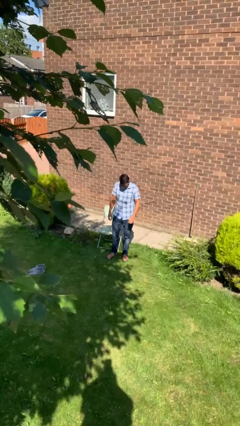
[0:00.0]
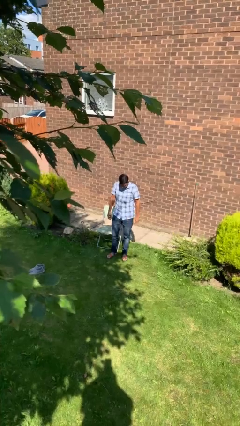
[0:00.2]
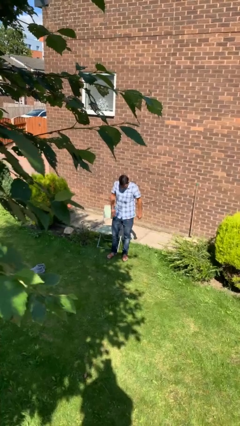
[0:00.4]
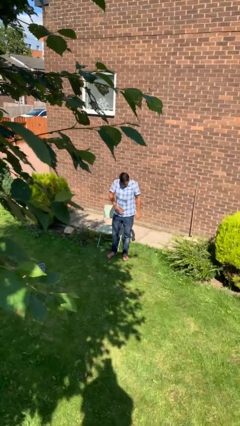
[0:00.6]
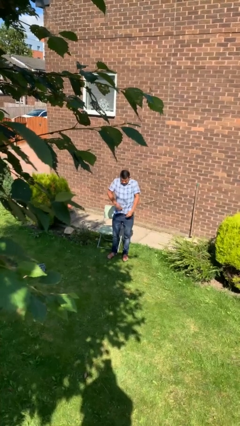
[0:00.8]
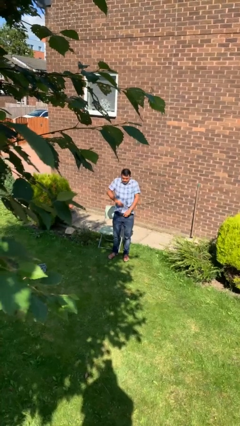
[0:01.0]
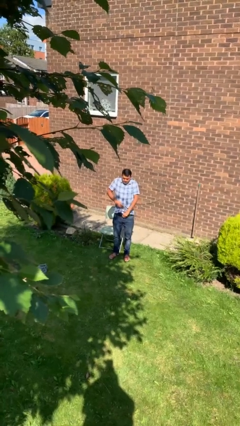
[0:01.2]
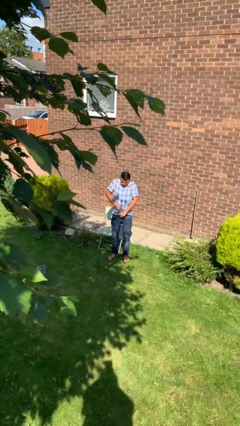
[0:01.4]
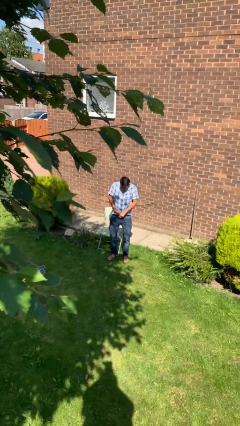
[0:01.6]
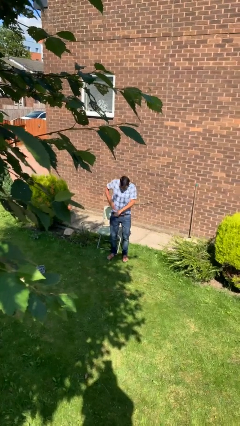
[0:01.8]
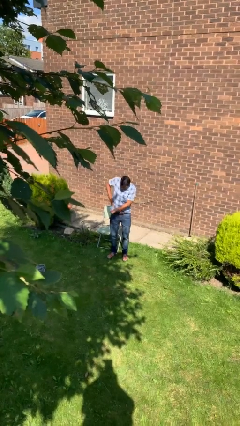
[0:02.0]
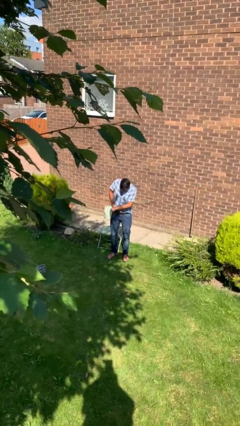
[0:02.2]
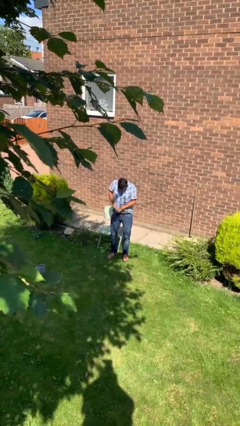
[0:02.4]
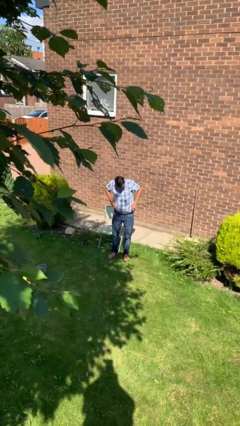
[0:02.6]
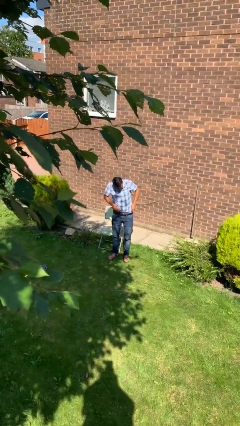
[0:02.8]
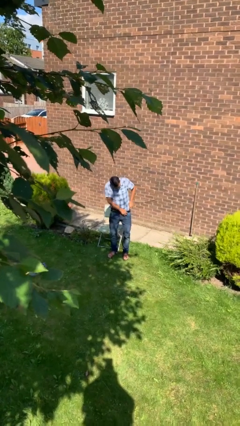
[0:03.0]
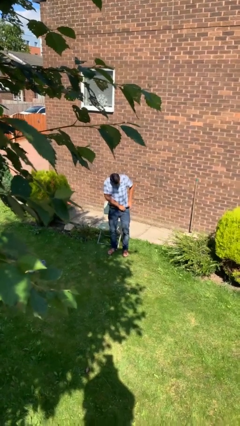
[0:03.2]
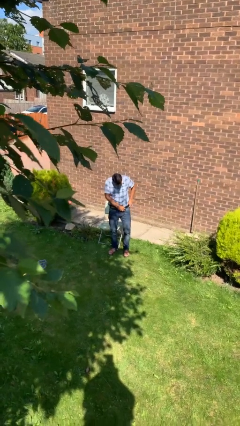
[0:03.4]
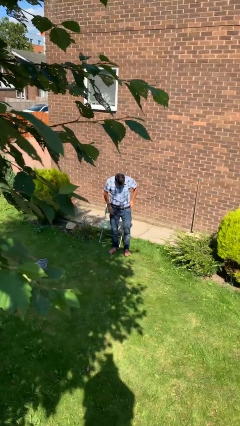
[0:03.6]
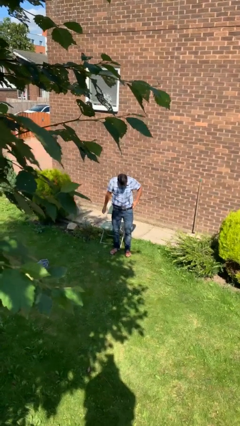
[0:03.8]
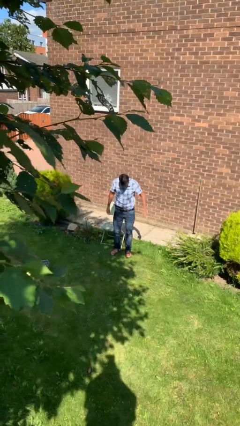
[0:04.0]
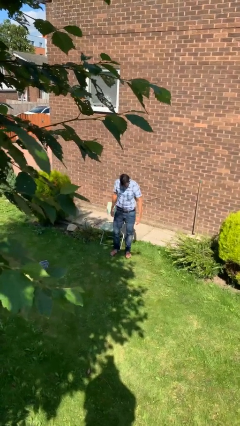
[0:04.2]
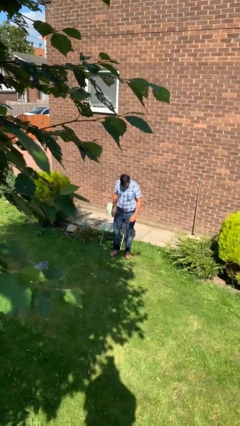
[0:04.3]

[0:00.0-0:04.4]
person tucks in shirt

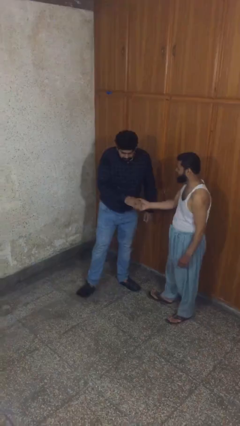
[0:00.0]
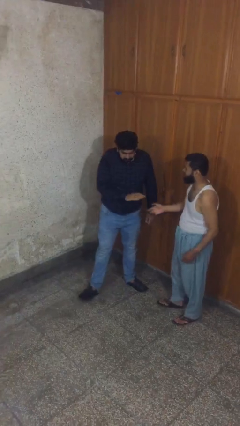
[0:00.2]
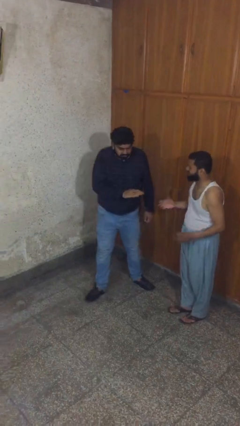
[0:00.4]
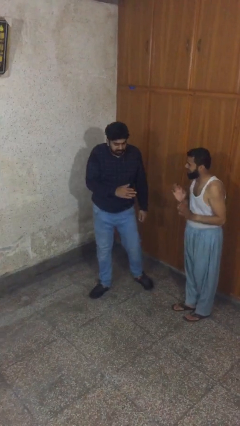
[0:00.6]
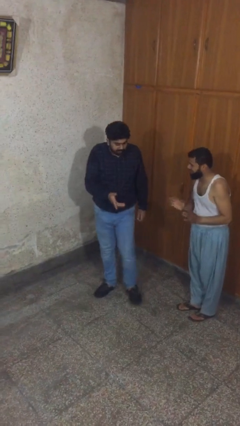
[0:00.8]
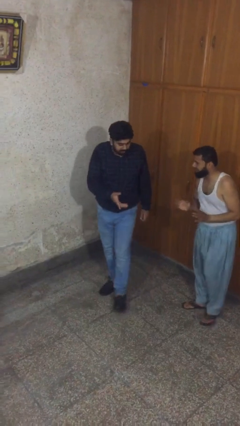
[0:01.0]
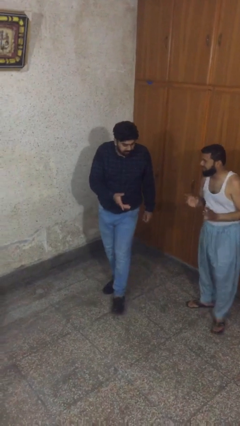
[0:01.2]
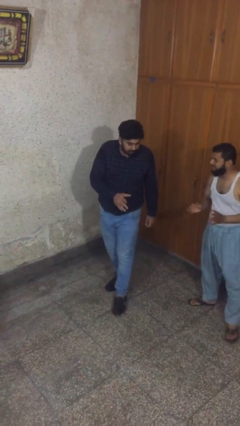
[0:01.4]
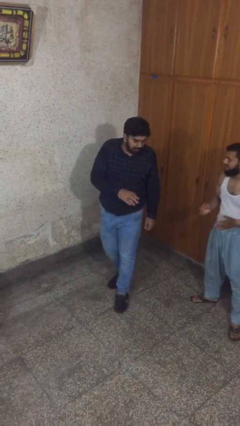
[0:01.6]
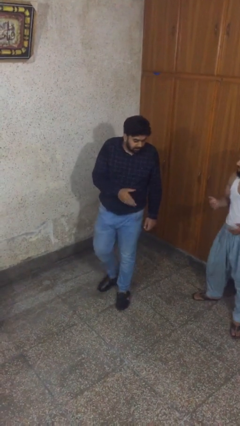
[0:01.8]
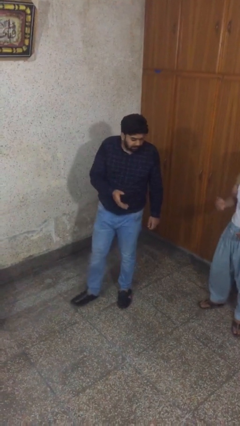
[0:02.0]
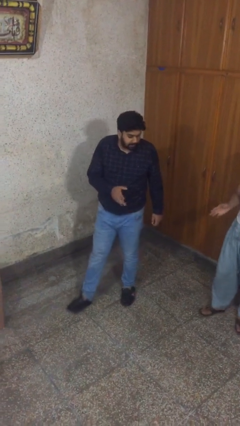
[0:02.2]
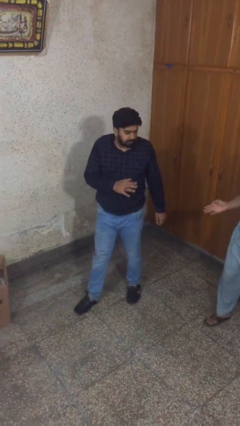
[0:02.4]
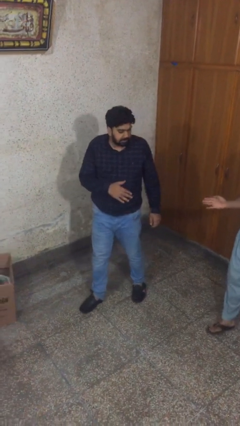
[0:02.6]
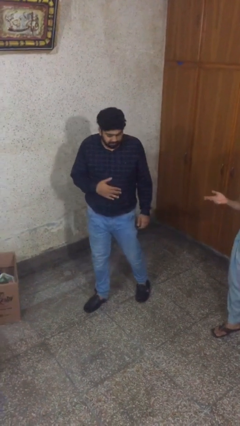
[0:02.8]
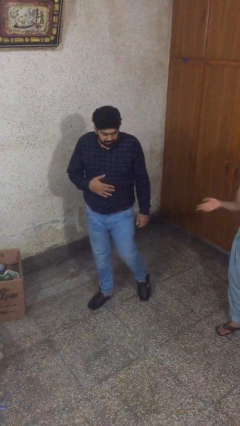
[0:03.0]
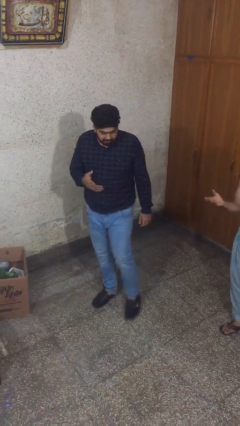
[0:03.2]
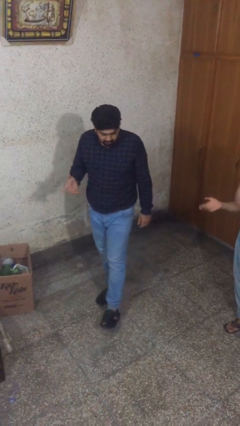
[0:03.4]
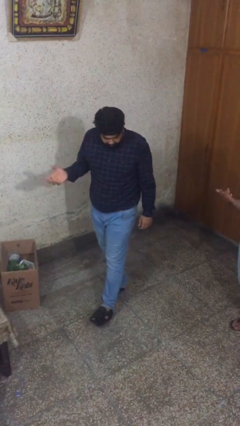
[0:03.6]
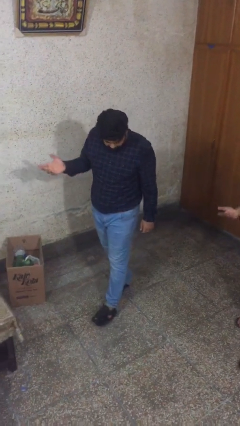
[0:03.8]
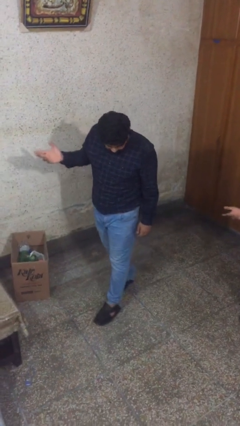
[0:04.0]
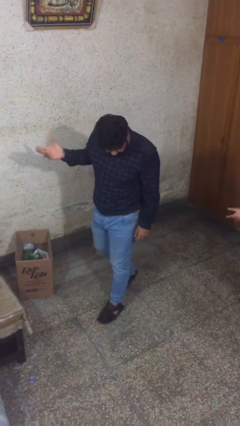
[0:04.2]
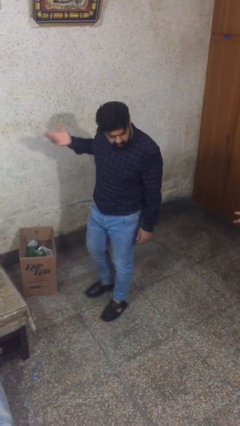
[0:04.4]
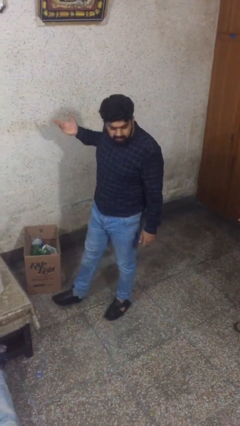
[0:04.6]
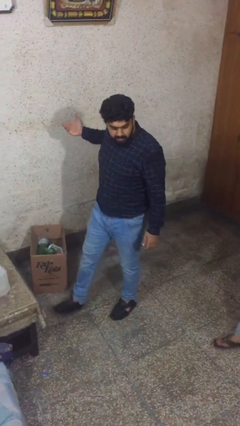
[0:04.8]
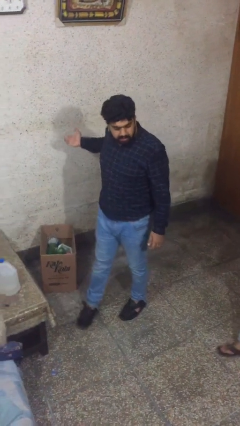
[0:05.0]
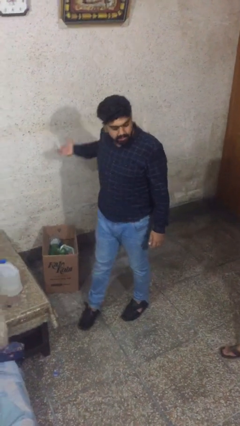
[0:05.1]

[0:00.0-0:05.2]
person talks to person

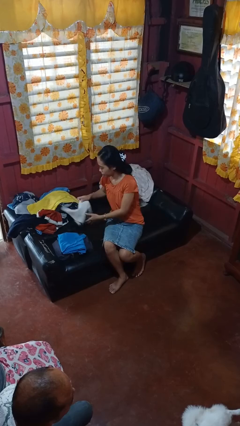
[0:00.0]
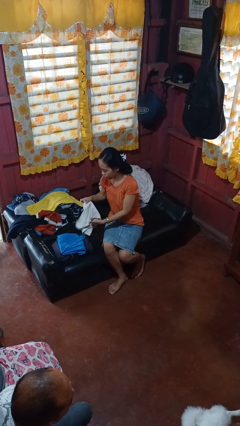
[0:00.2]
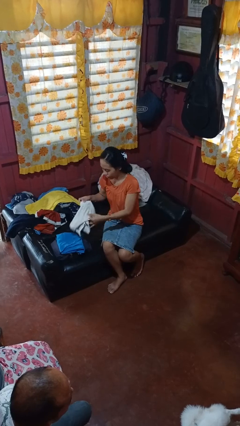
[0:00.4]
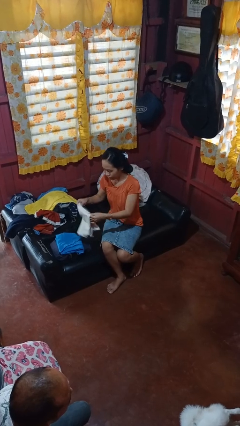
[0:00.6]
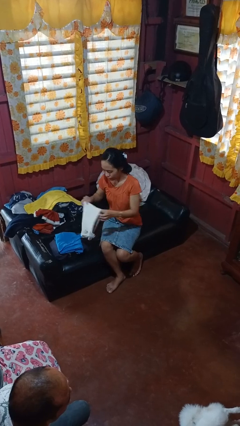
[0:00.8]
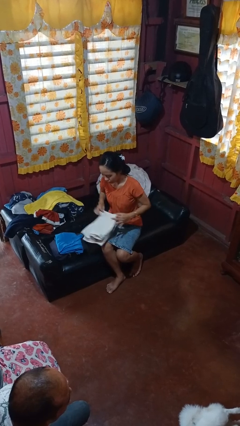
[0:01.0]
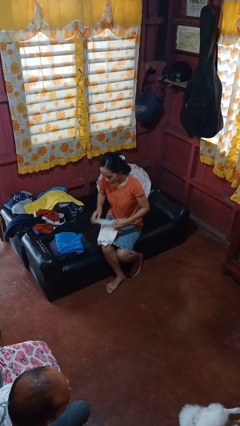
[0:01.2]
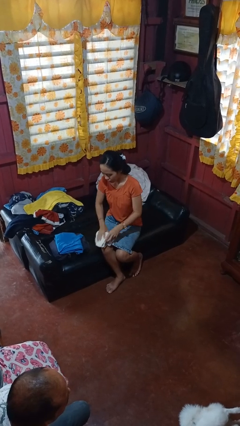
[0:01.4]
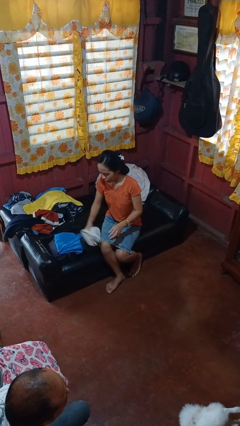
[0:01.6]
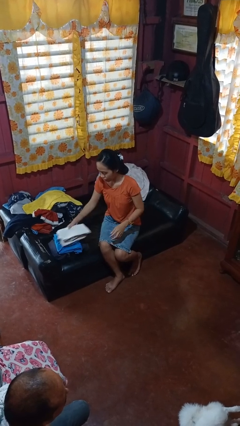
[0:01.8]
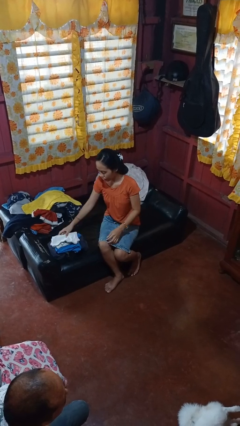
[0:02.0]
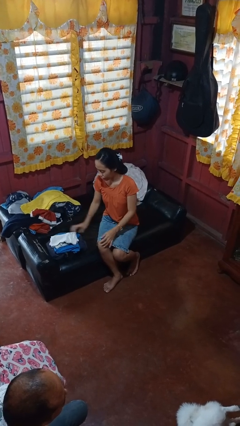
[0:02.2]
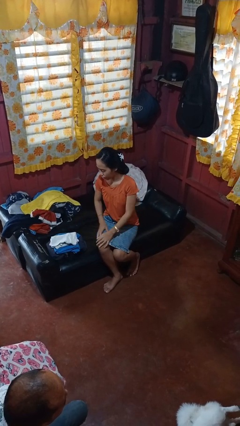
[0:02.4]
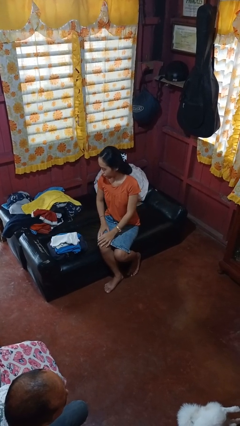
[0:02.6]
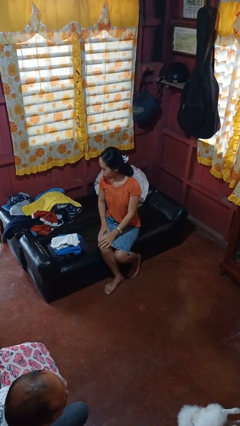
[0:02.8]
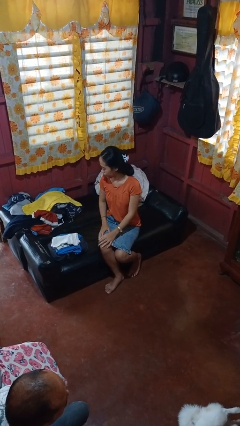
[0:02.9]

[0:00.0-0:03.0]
person folds shirt

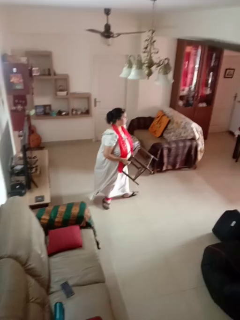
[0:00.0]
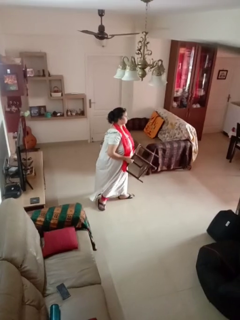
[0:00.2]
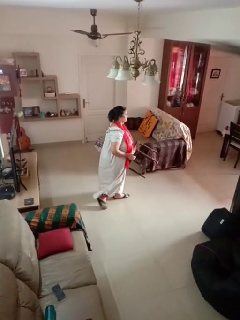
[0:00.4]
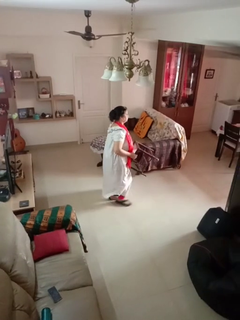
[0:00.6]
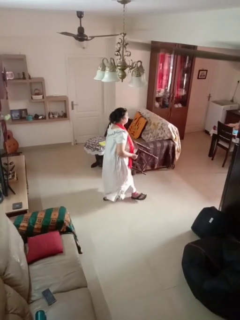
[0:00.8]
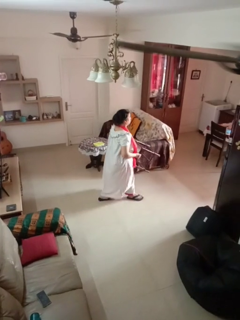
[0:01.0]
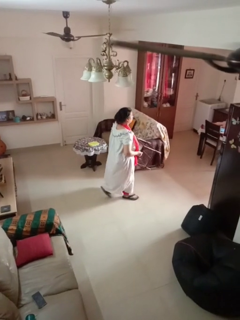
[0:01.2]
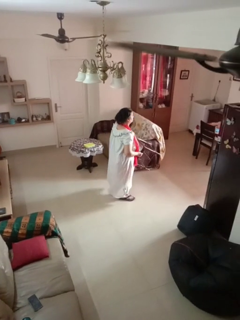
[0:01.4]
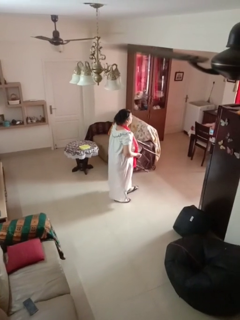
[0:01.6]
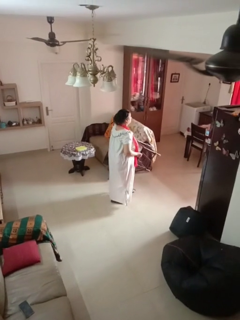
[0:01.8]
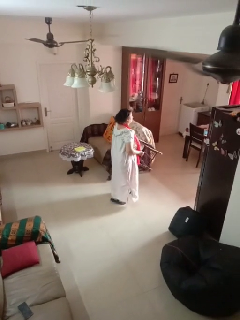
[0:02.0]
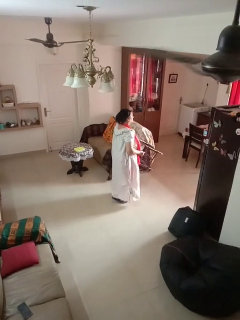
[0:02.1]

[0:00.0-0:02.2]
person carries furniture

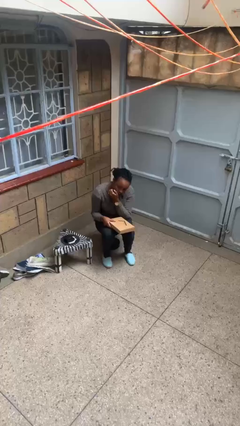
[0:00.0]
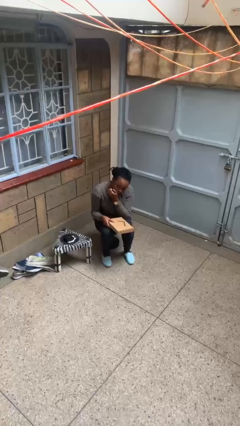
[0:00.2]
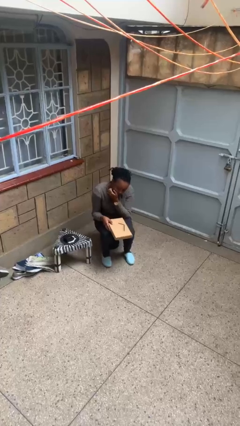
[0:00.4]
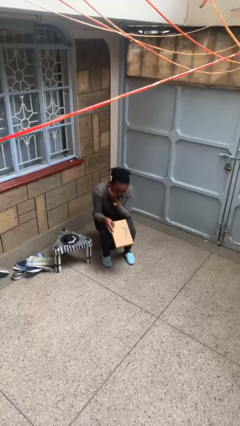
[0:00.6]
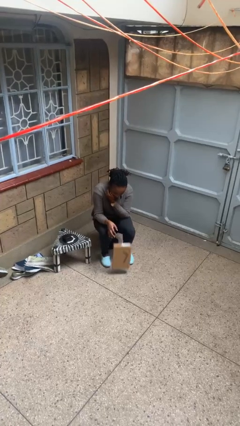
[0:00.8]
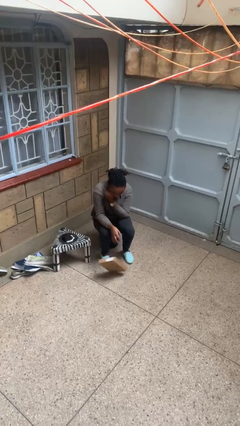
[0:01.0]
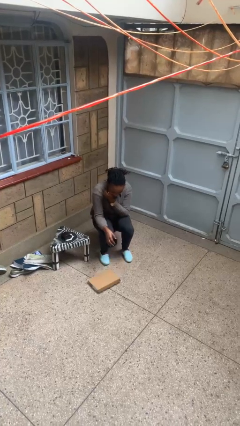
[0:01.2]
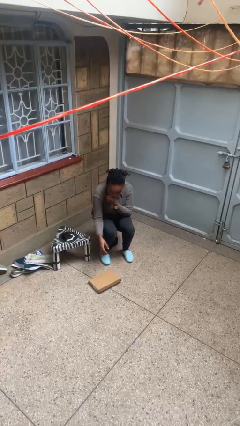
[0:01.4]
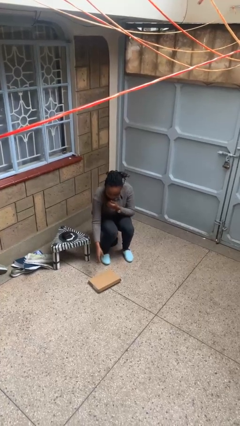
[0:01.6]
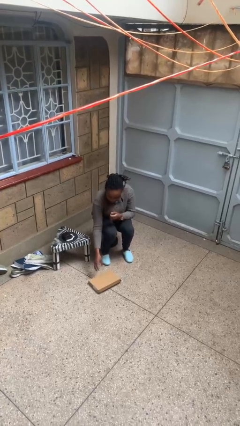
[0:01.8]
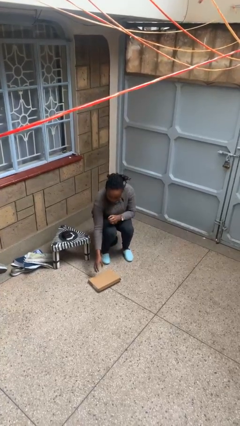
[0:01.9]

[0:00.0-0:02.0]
person drops object

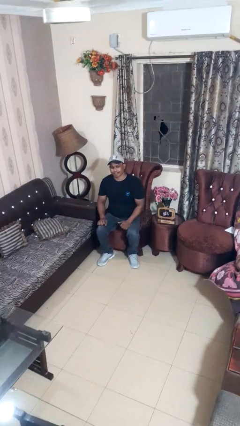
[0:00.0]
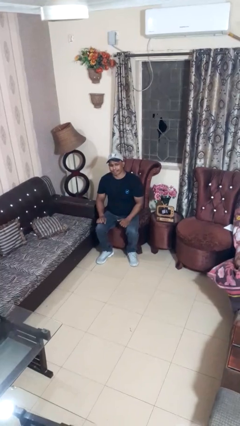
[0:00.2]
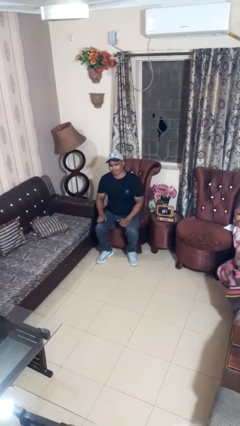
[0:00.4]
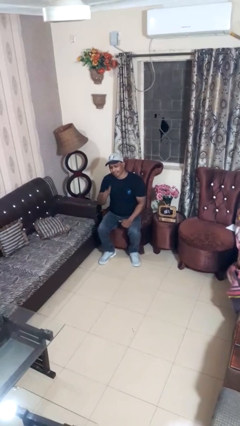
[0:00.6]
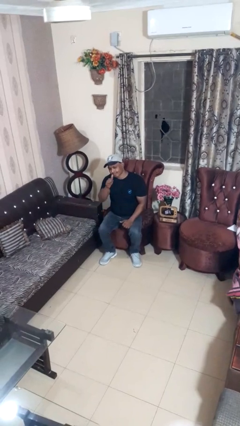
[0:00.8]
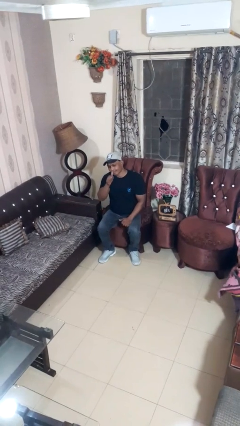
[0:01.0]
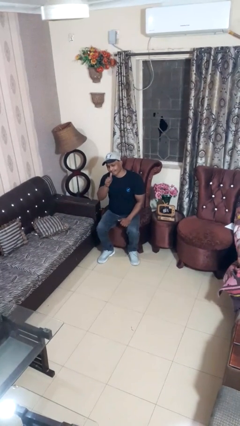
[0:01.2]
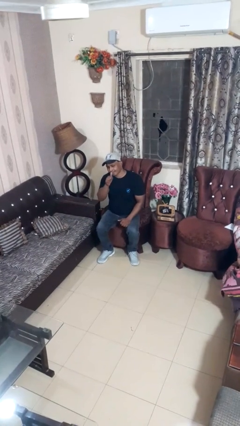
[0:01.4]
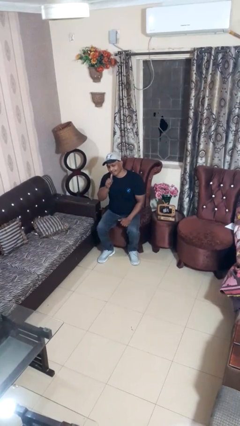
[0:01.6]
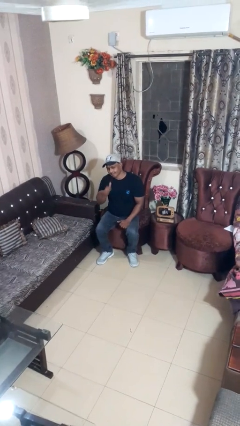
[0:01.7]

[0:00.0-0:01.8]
person gestures thumbs up
